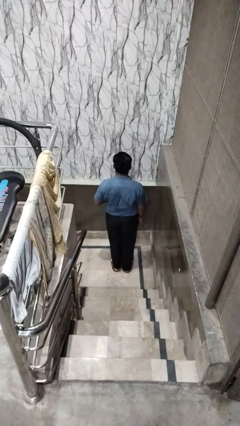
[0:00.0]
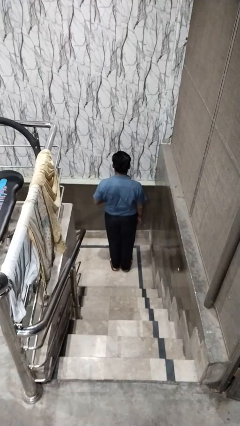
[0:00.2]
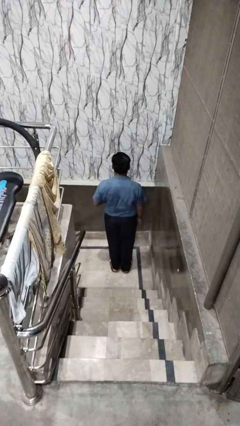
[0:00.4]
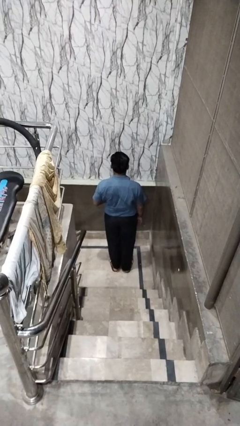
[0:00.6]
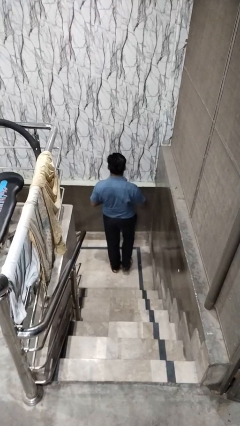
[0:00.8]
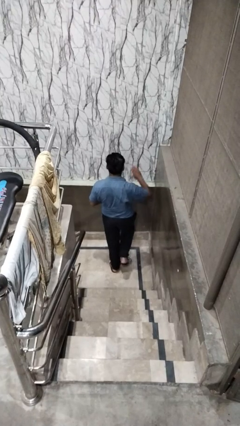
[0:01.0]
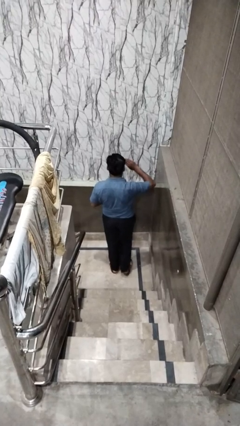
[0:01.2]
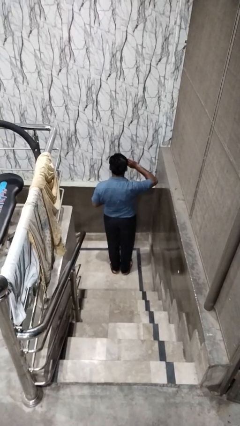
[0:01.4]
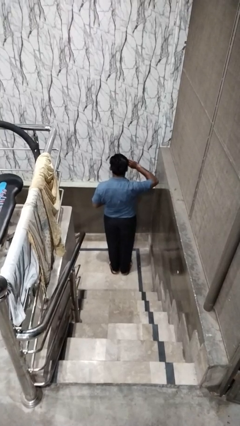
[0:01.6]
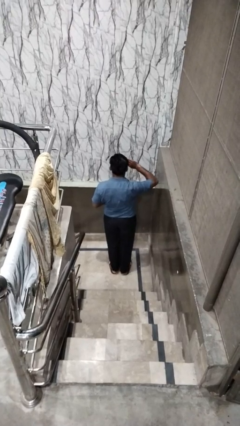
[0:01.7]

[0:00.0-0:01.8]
person salutes

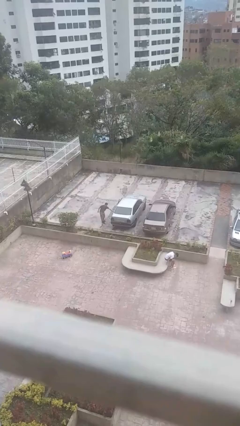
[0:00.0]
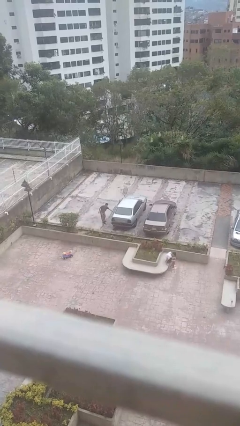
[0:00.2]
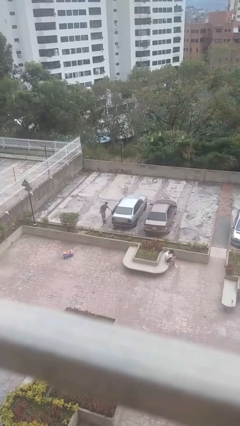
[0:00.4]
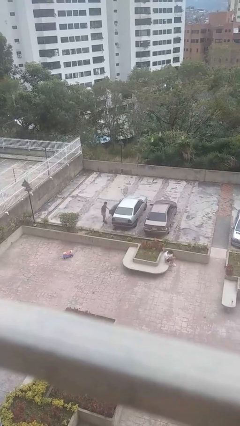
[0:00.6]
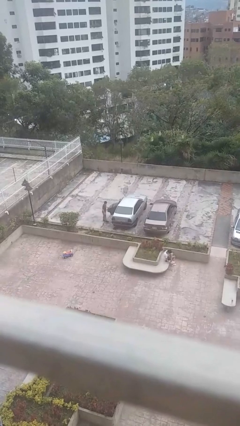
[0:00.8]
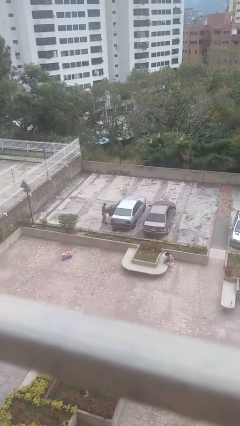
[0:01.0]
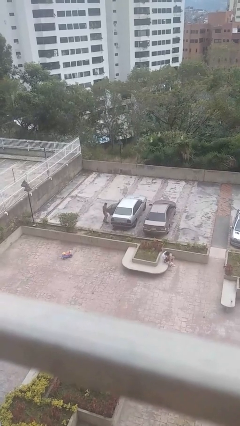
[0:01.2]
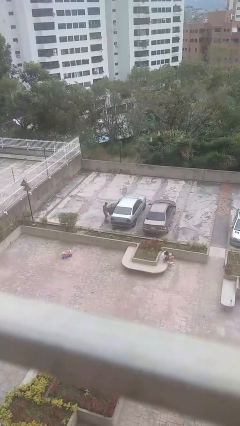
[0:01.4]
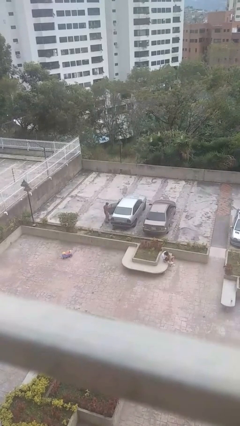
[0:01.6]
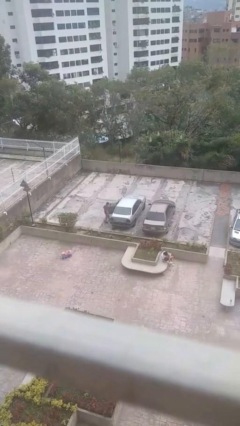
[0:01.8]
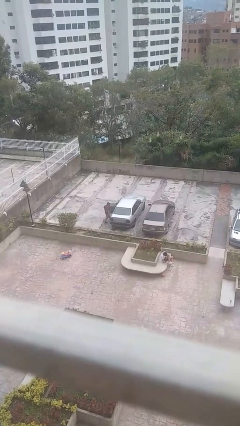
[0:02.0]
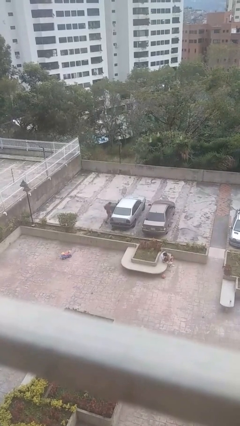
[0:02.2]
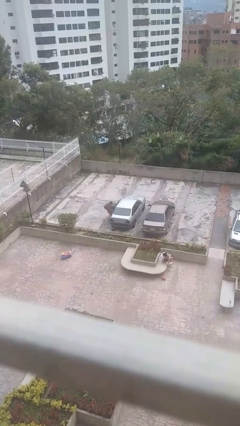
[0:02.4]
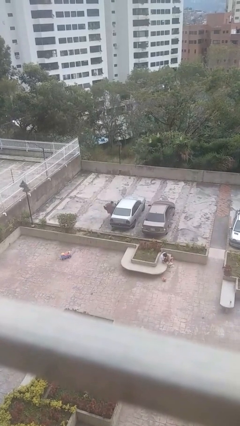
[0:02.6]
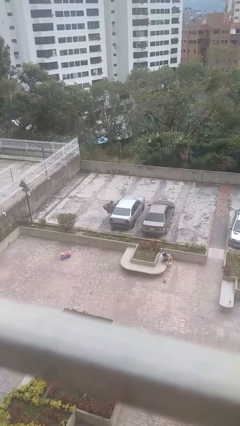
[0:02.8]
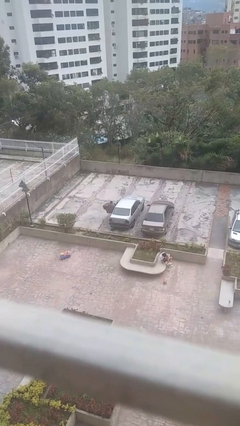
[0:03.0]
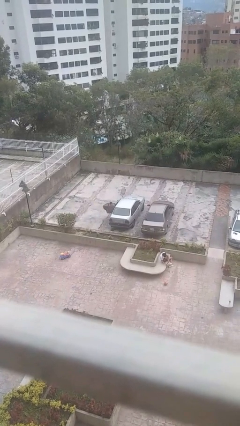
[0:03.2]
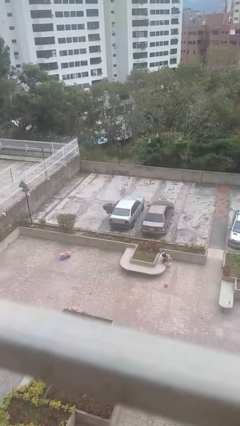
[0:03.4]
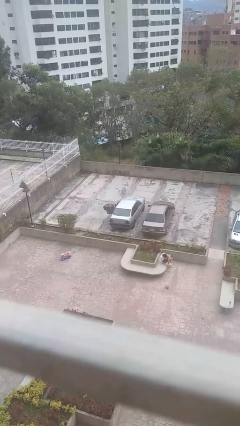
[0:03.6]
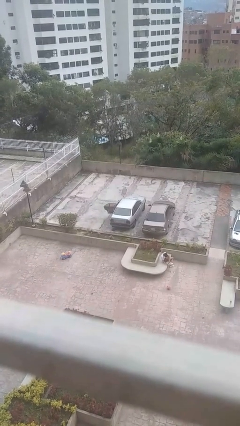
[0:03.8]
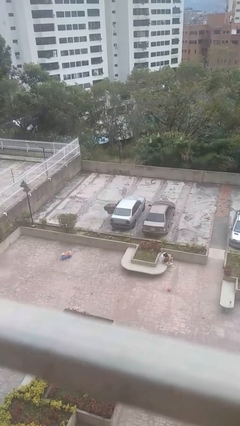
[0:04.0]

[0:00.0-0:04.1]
car picks up person

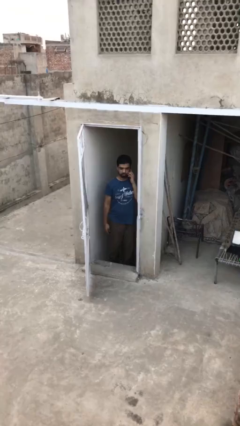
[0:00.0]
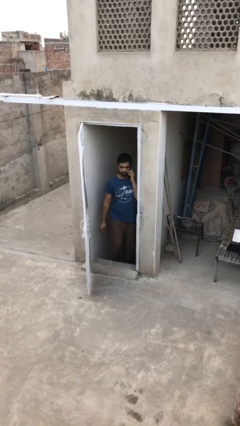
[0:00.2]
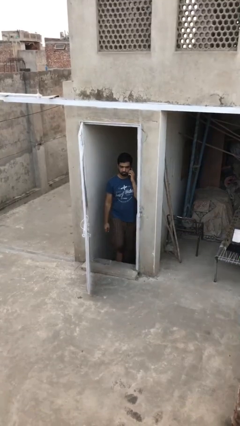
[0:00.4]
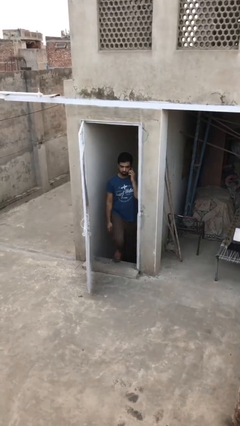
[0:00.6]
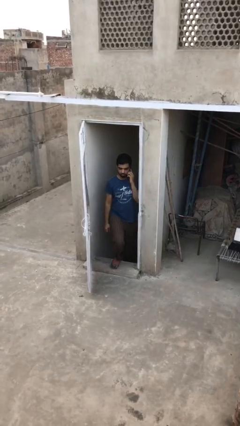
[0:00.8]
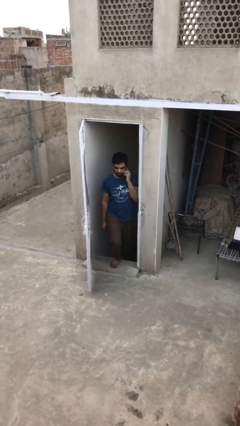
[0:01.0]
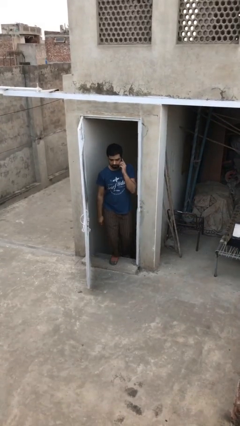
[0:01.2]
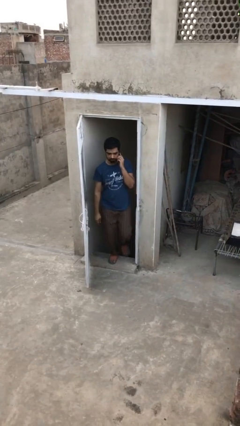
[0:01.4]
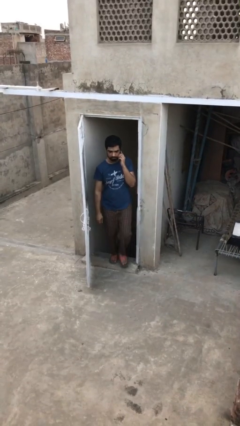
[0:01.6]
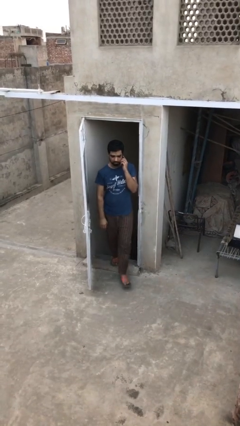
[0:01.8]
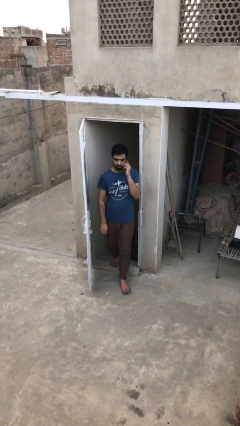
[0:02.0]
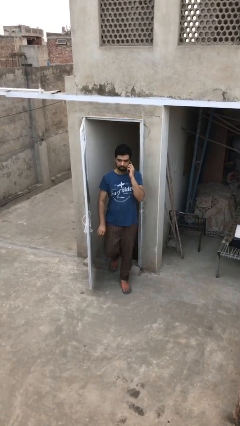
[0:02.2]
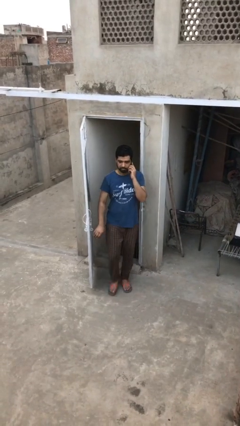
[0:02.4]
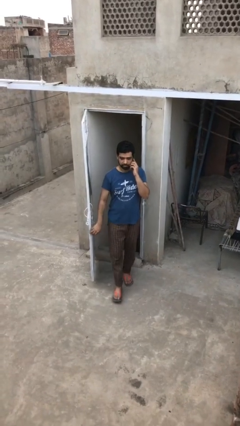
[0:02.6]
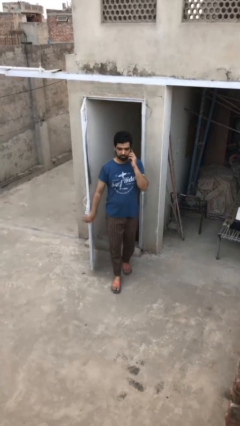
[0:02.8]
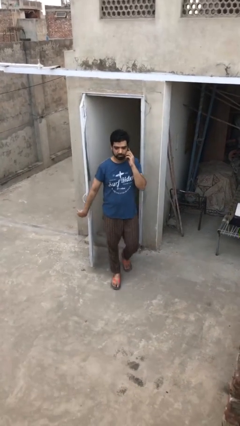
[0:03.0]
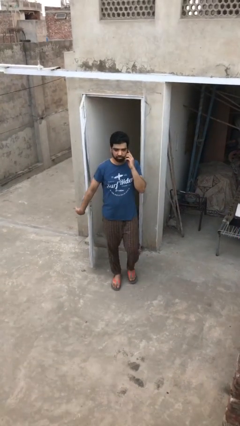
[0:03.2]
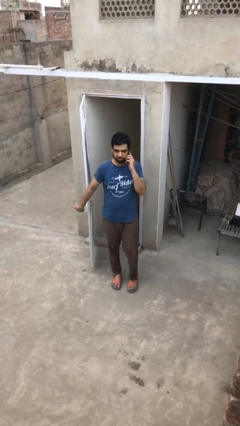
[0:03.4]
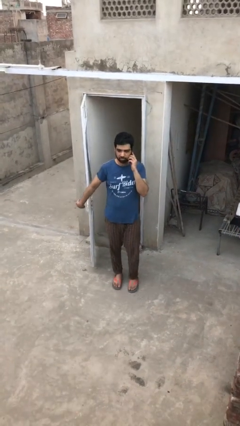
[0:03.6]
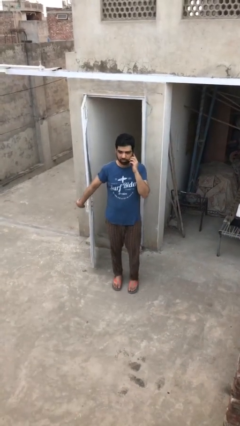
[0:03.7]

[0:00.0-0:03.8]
person enters scene through structure

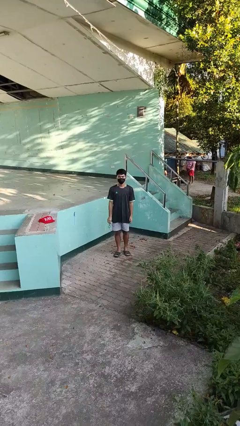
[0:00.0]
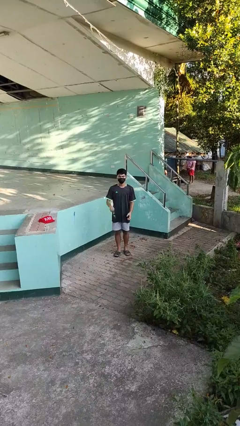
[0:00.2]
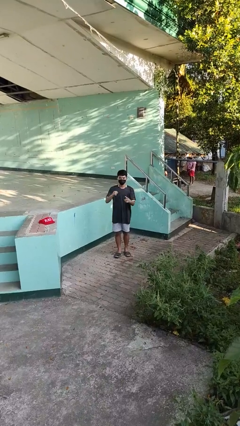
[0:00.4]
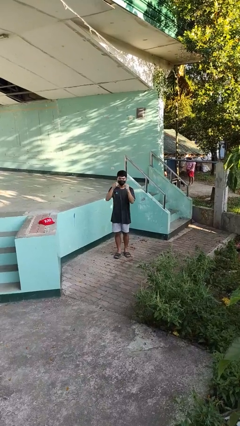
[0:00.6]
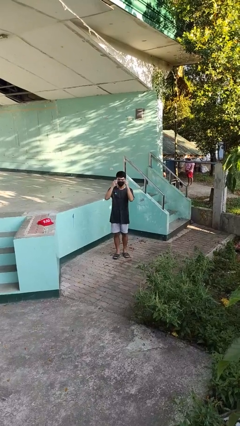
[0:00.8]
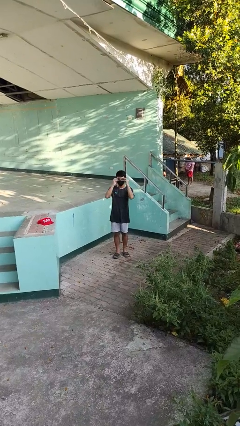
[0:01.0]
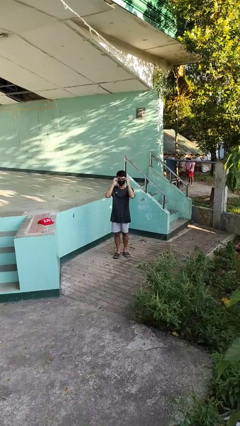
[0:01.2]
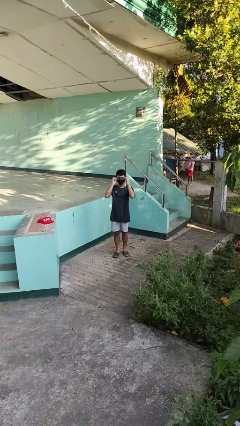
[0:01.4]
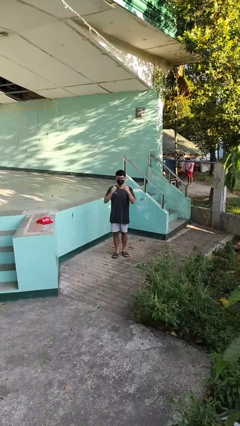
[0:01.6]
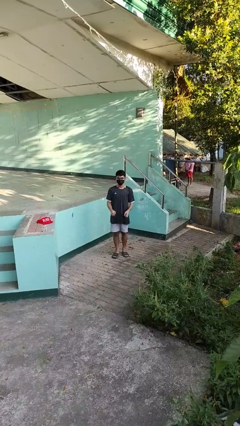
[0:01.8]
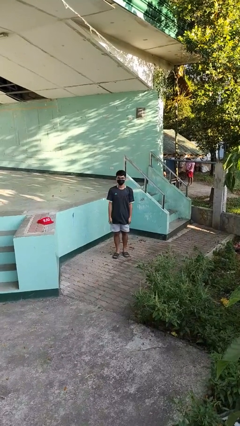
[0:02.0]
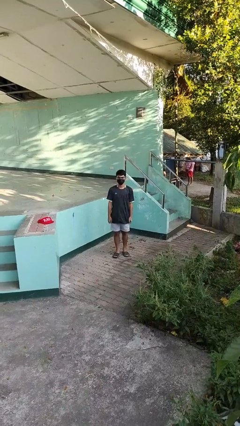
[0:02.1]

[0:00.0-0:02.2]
person puts on glasses

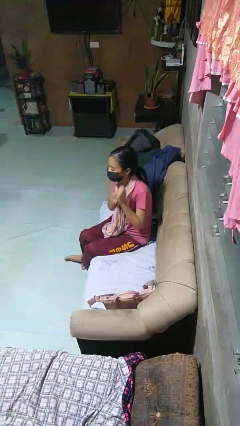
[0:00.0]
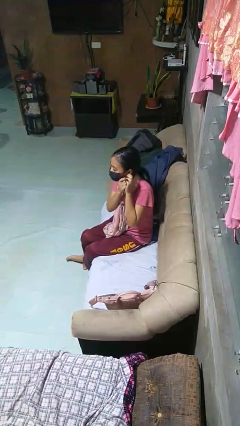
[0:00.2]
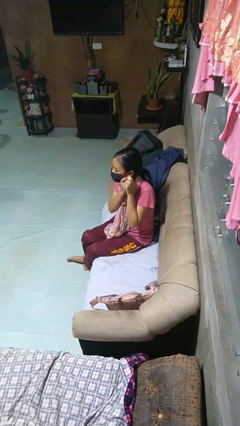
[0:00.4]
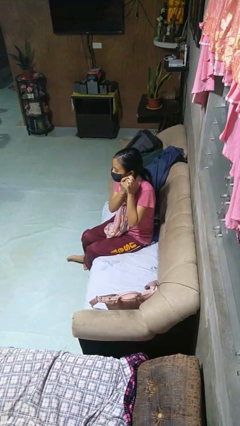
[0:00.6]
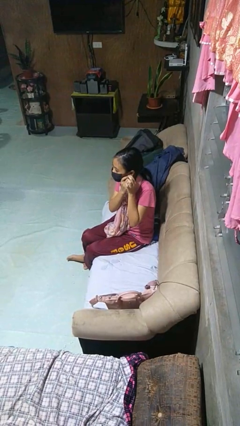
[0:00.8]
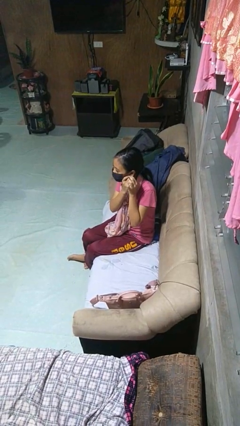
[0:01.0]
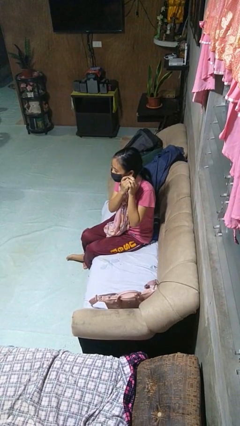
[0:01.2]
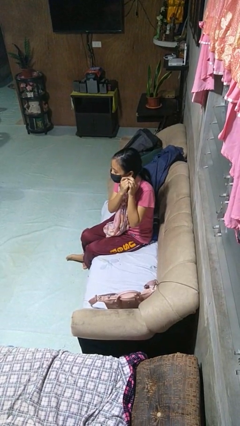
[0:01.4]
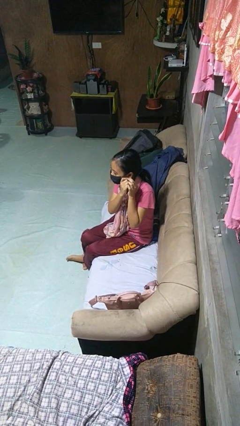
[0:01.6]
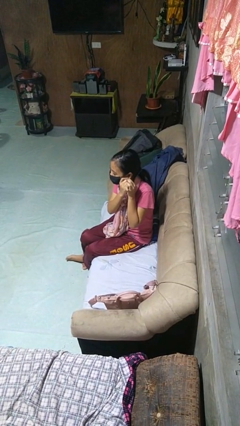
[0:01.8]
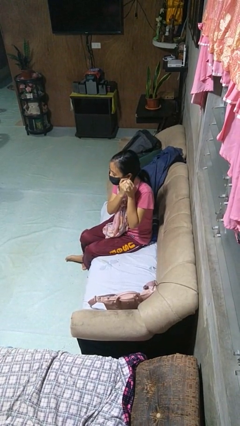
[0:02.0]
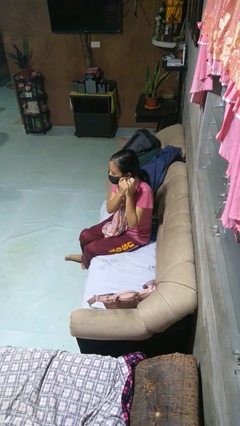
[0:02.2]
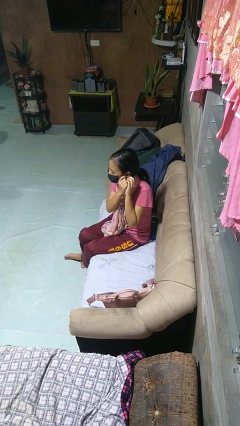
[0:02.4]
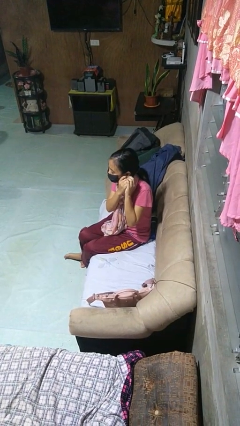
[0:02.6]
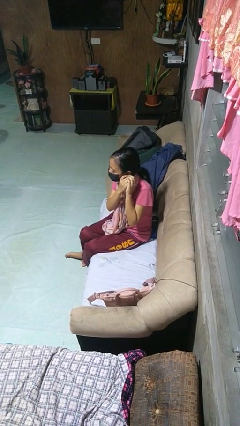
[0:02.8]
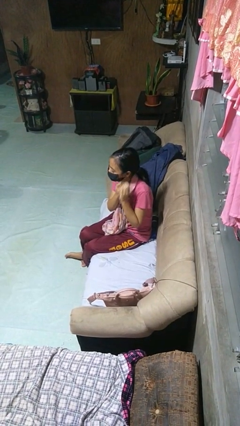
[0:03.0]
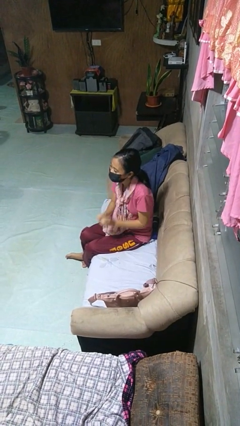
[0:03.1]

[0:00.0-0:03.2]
person puts on earrings

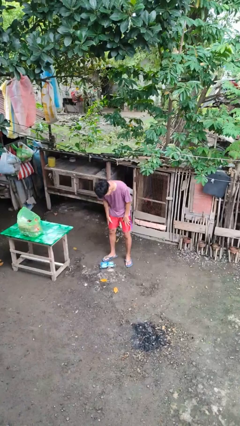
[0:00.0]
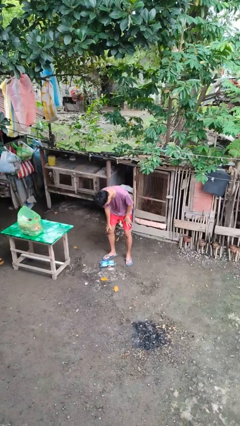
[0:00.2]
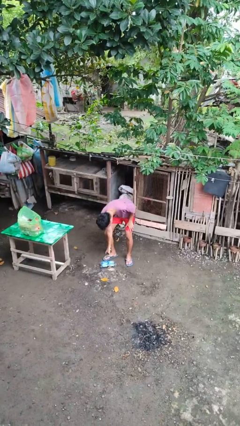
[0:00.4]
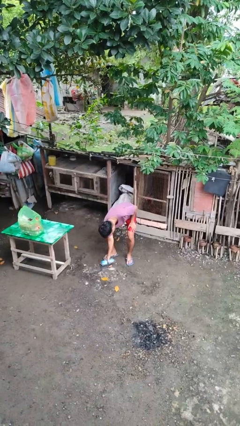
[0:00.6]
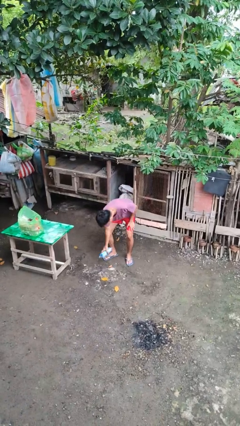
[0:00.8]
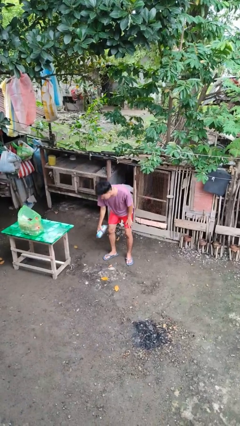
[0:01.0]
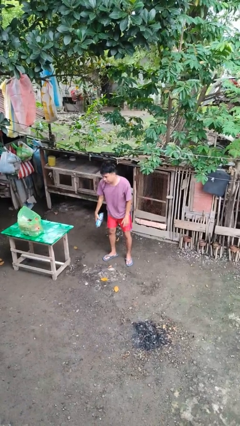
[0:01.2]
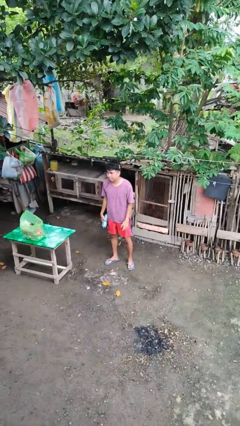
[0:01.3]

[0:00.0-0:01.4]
person picks up object from floor

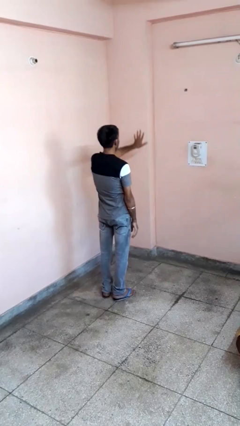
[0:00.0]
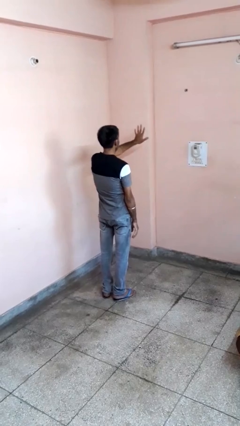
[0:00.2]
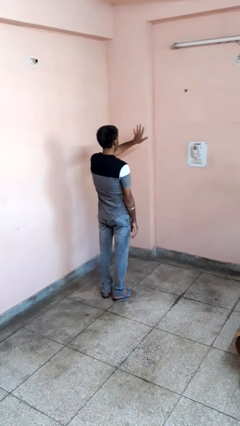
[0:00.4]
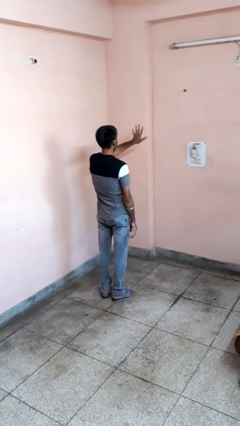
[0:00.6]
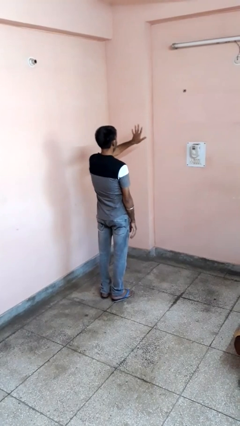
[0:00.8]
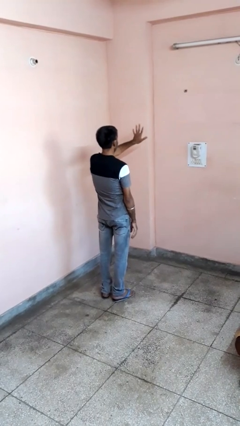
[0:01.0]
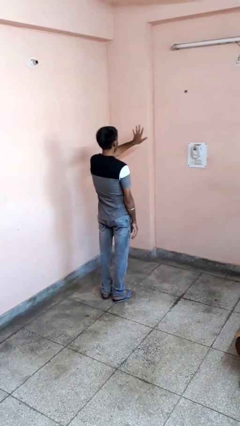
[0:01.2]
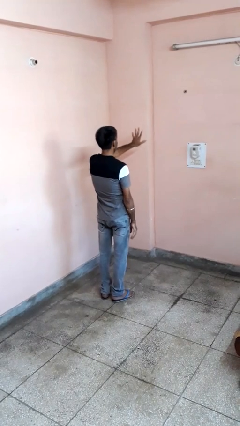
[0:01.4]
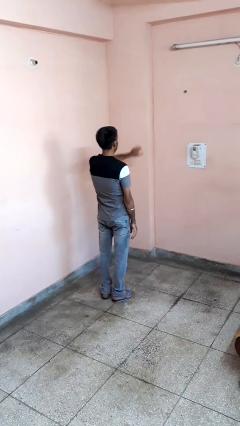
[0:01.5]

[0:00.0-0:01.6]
person gestures number five
